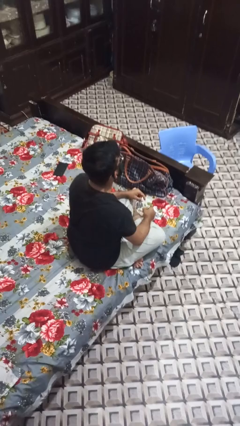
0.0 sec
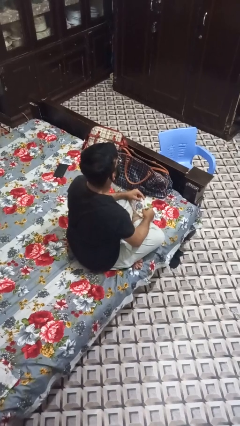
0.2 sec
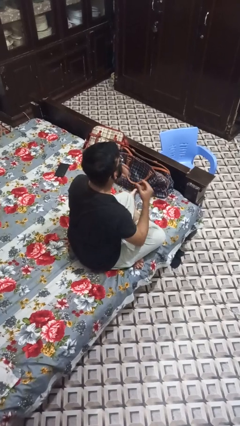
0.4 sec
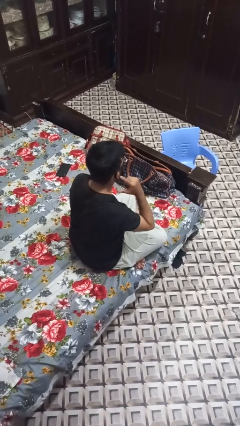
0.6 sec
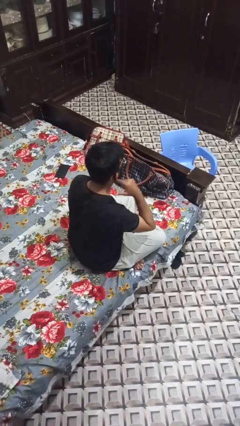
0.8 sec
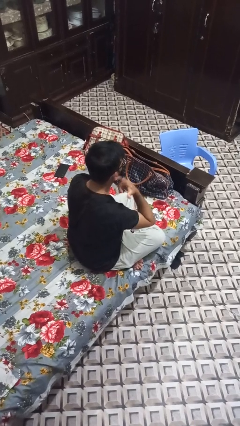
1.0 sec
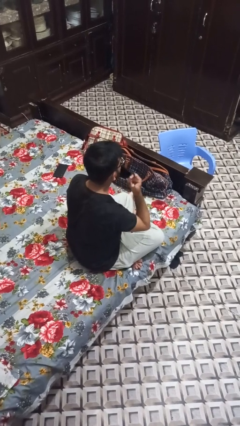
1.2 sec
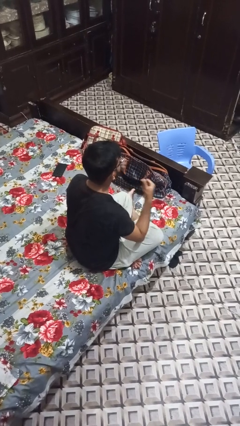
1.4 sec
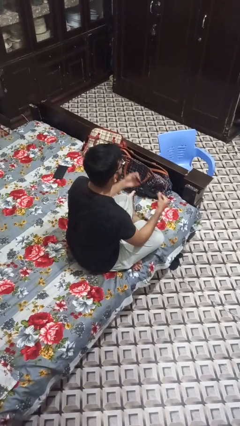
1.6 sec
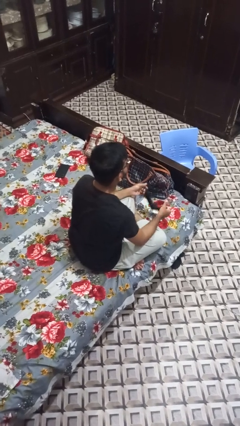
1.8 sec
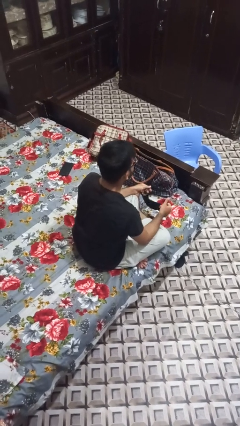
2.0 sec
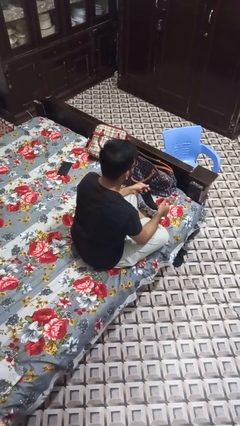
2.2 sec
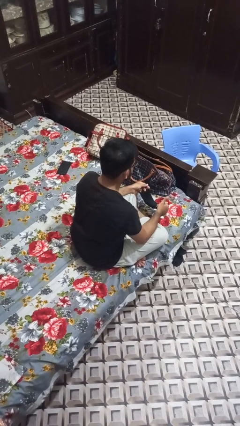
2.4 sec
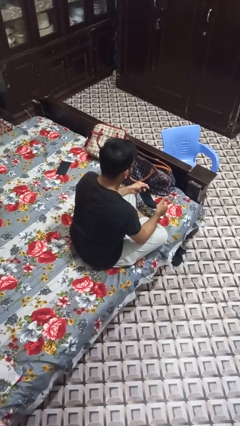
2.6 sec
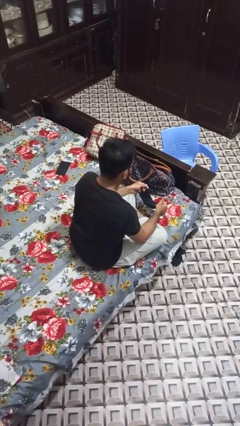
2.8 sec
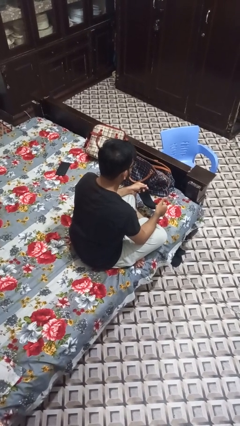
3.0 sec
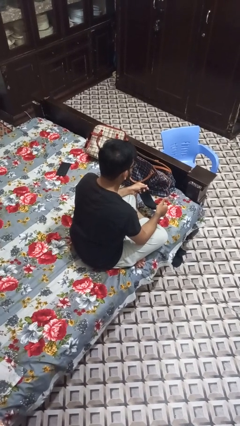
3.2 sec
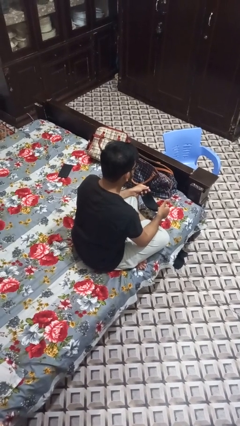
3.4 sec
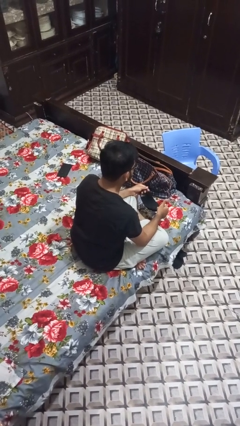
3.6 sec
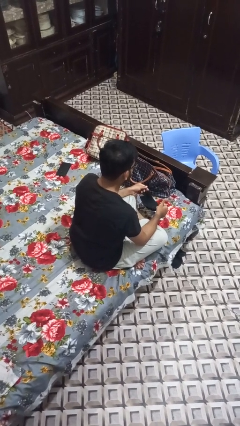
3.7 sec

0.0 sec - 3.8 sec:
person takes off facemask

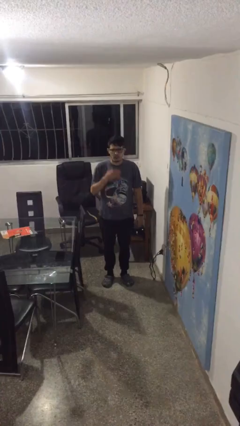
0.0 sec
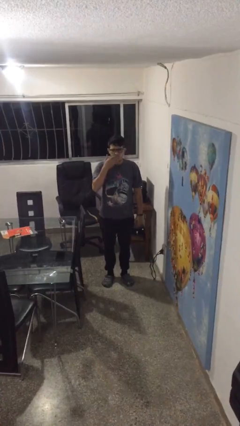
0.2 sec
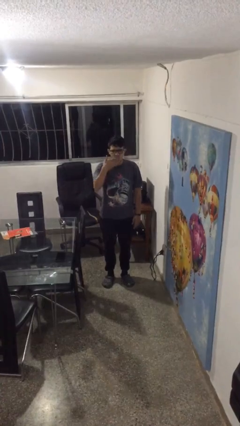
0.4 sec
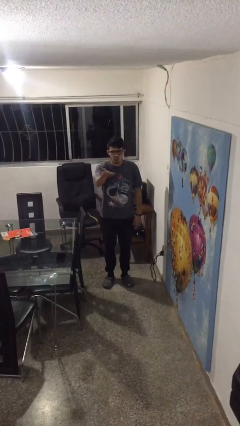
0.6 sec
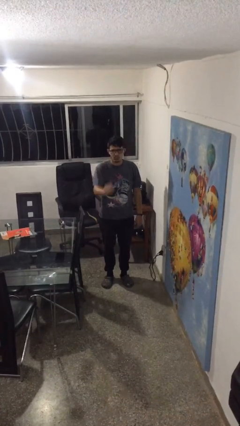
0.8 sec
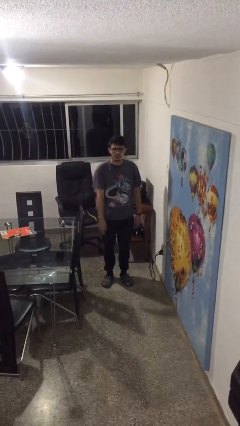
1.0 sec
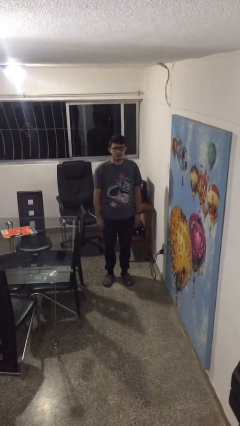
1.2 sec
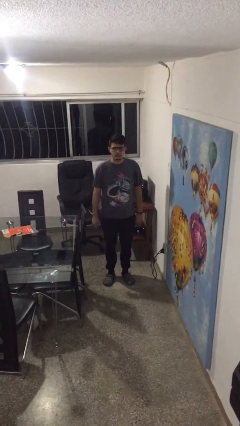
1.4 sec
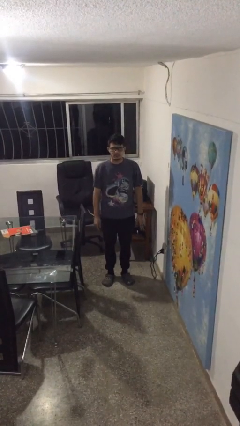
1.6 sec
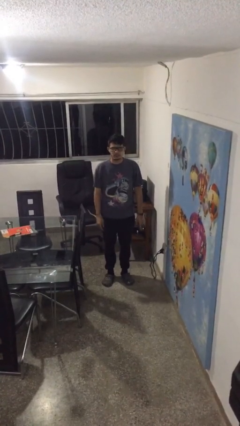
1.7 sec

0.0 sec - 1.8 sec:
person gestures blow kiss

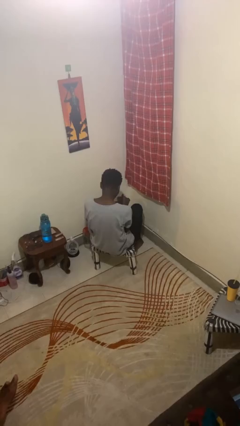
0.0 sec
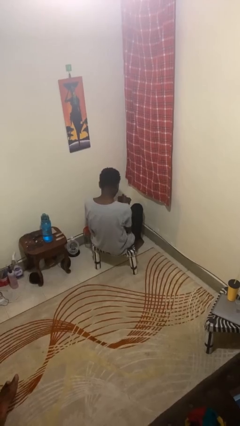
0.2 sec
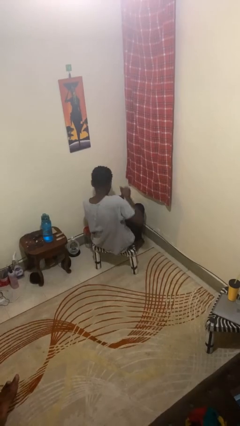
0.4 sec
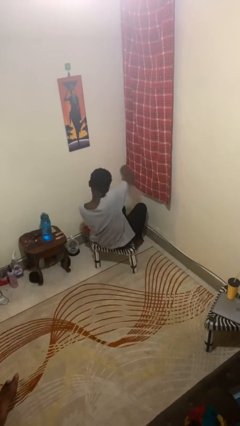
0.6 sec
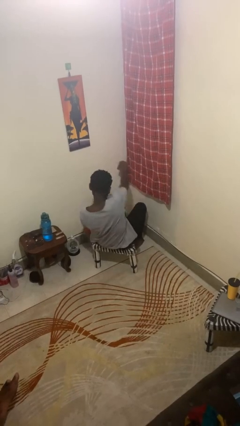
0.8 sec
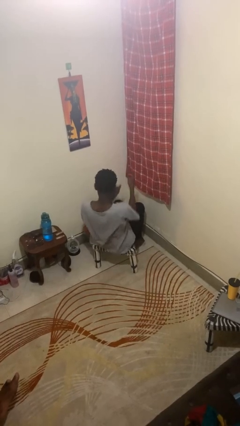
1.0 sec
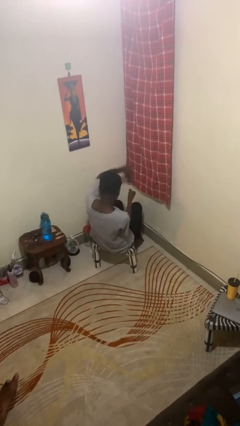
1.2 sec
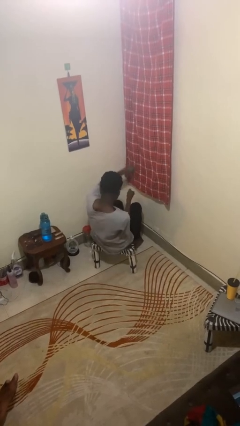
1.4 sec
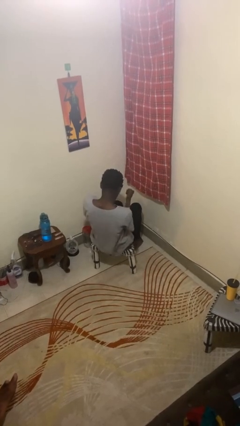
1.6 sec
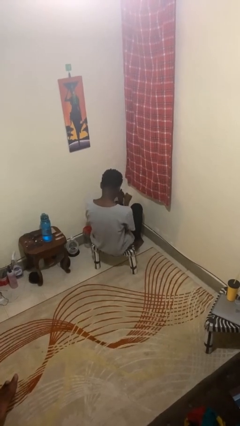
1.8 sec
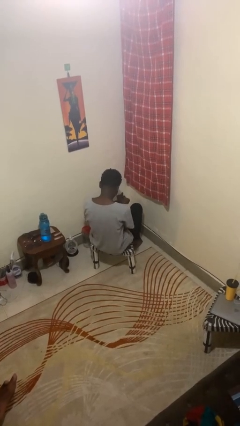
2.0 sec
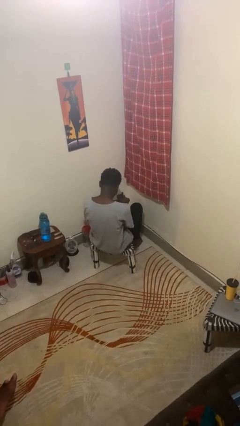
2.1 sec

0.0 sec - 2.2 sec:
person punches

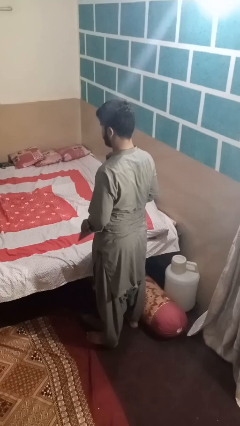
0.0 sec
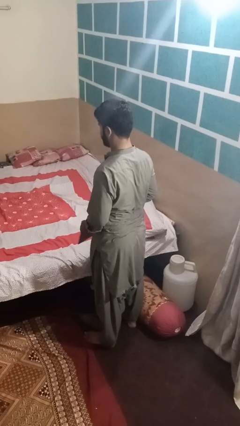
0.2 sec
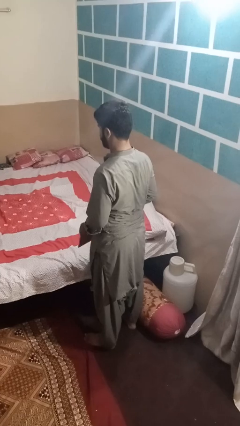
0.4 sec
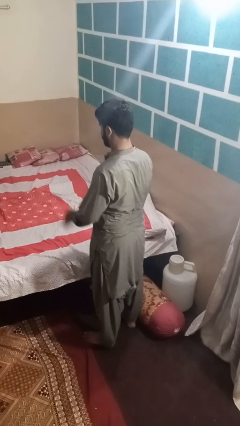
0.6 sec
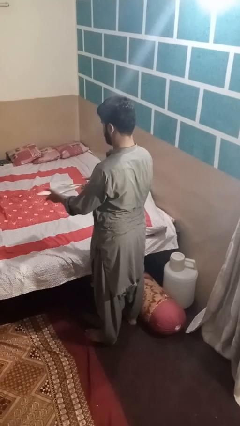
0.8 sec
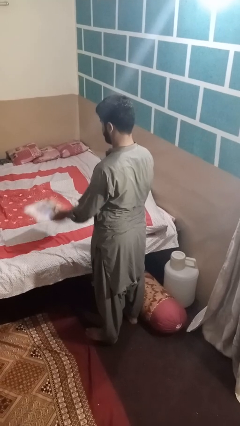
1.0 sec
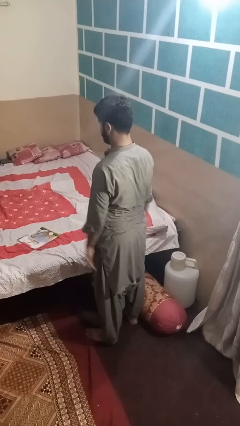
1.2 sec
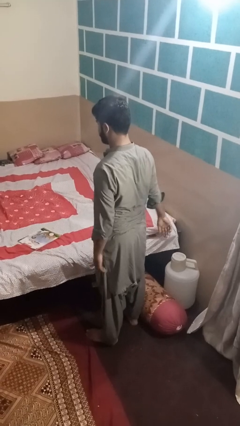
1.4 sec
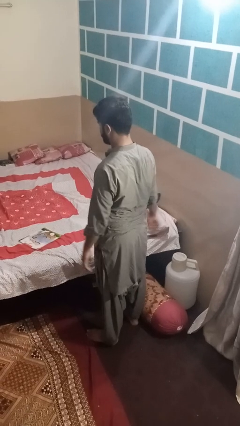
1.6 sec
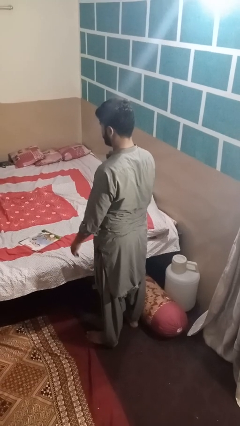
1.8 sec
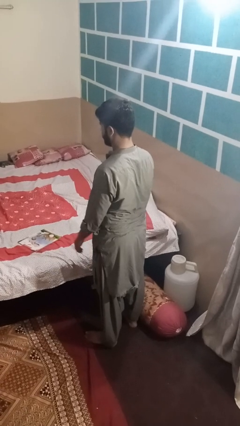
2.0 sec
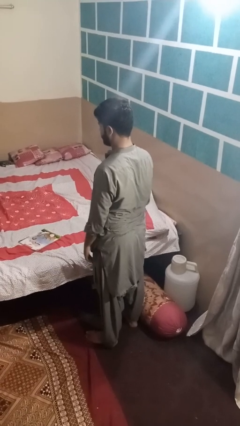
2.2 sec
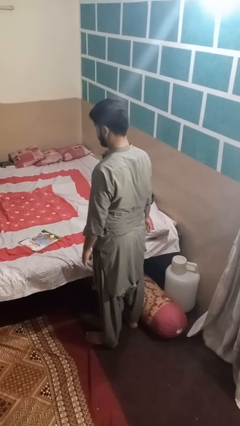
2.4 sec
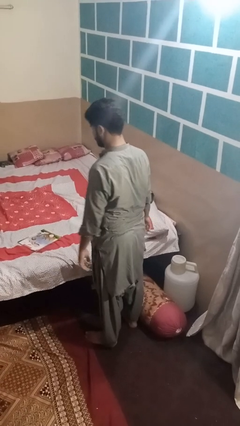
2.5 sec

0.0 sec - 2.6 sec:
person throws object on bed

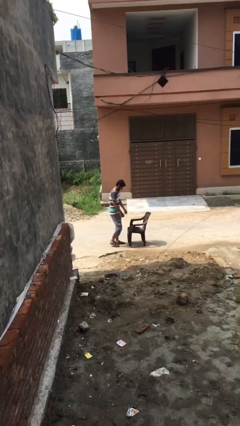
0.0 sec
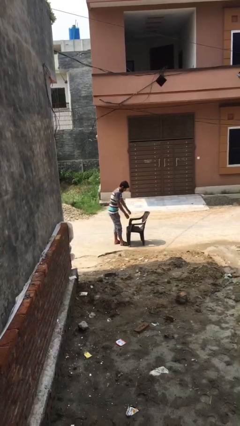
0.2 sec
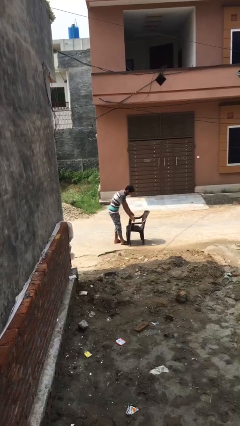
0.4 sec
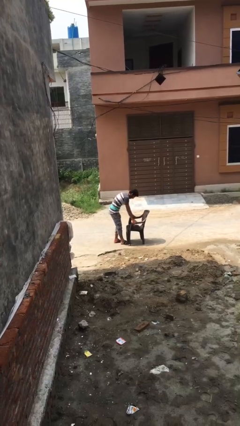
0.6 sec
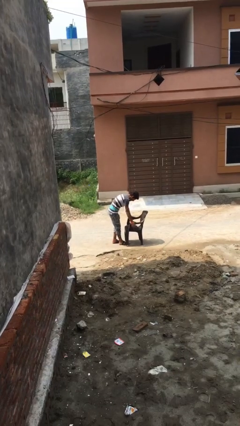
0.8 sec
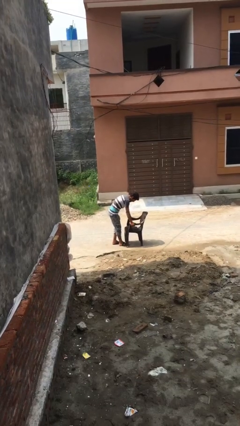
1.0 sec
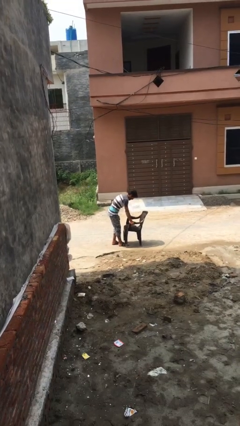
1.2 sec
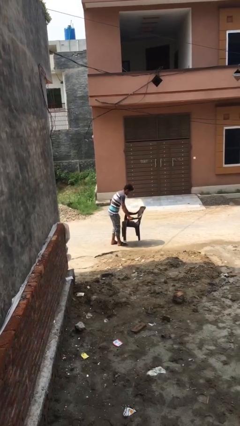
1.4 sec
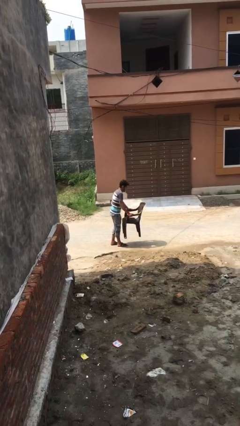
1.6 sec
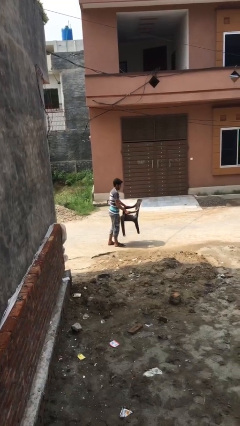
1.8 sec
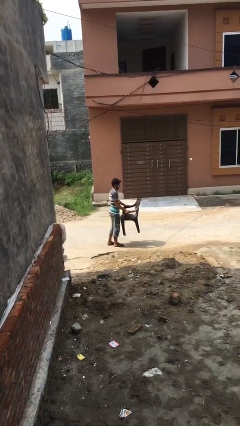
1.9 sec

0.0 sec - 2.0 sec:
person picks up object from floor

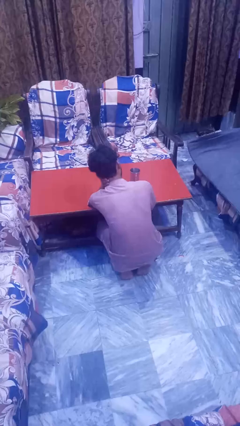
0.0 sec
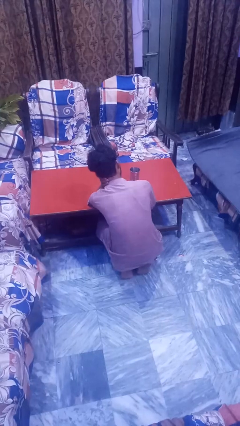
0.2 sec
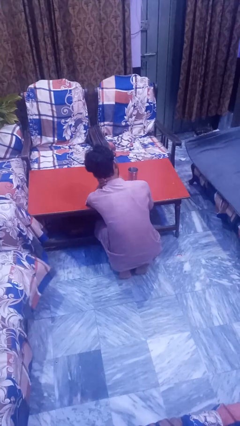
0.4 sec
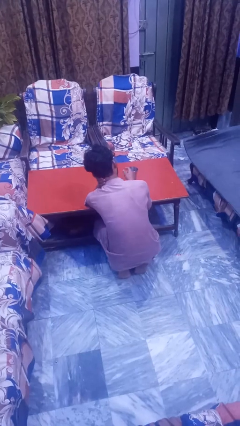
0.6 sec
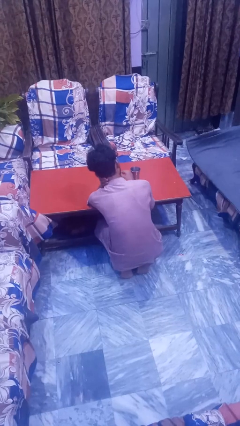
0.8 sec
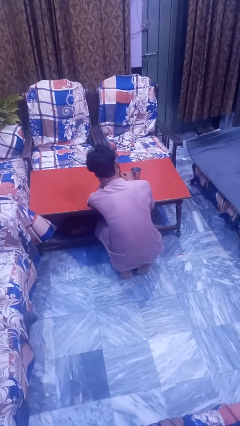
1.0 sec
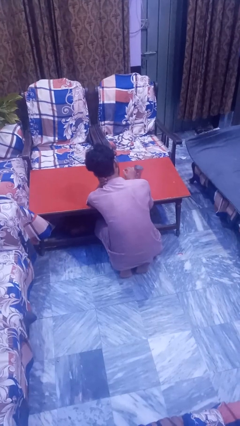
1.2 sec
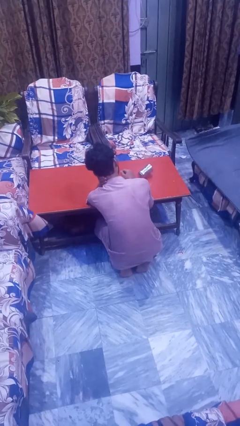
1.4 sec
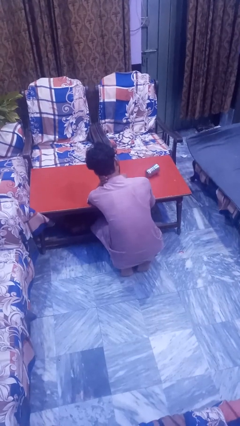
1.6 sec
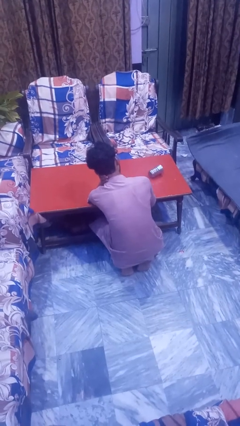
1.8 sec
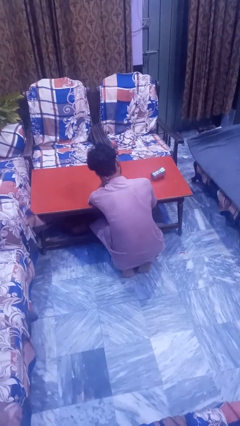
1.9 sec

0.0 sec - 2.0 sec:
person knocks over glass

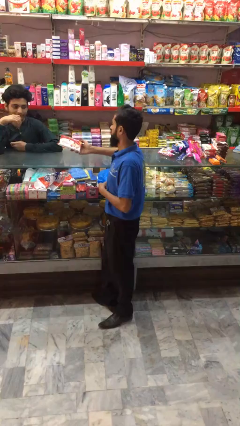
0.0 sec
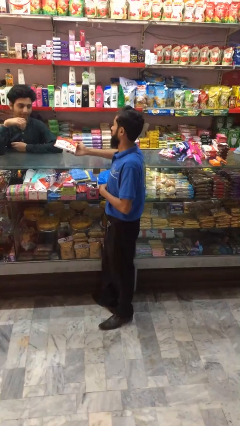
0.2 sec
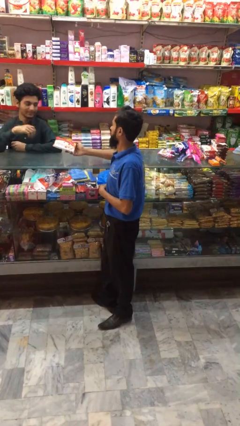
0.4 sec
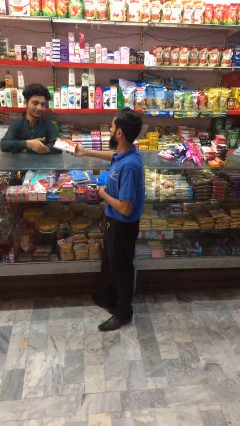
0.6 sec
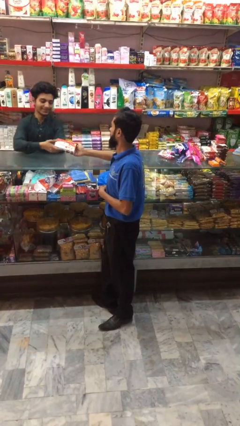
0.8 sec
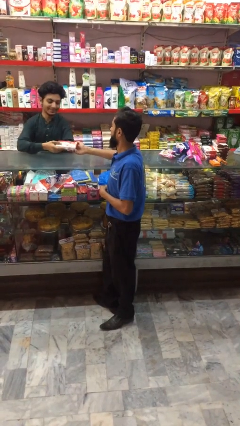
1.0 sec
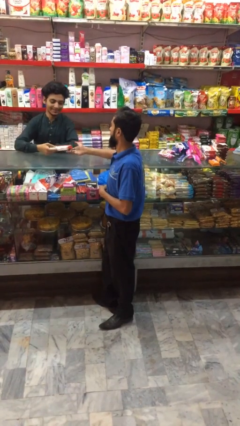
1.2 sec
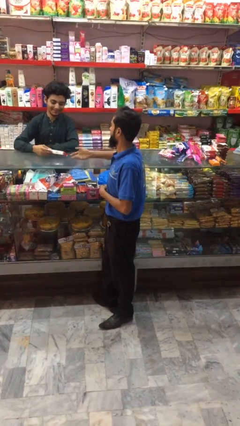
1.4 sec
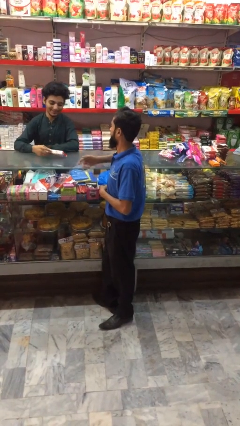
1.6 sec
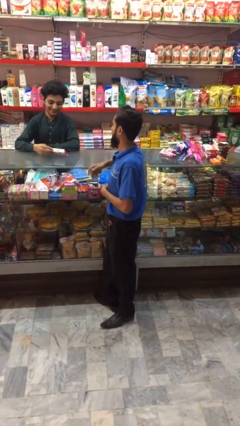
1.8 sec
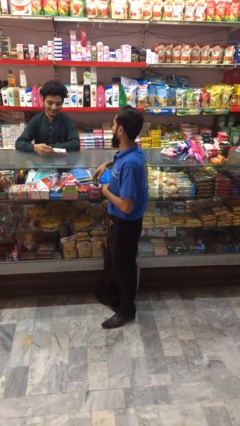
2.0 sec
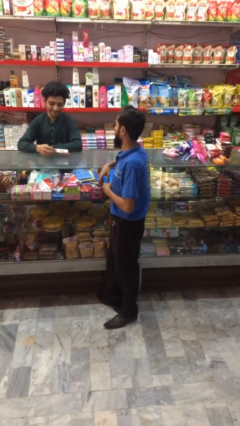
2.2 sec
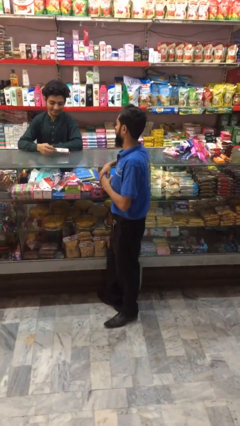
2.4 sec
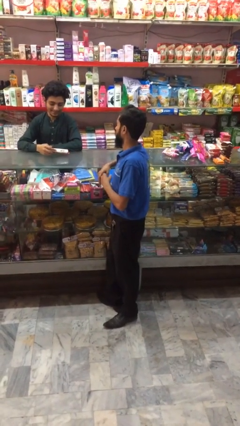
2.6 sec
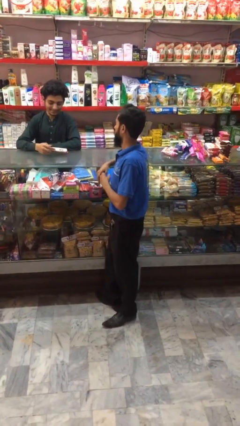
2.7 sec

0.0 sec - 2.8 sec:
person transfers object to person
